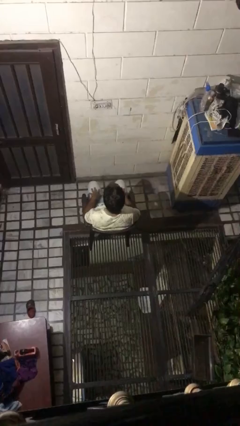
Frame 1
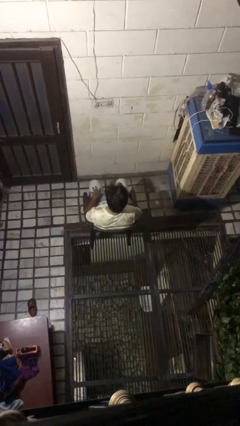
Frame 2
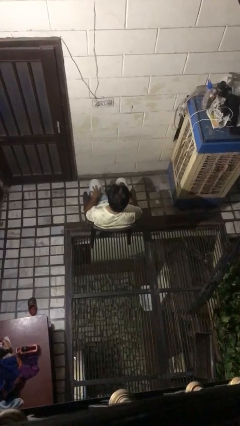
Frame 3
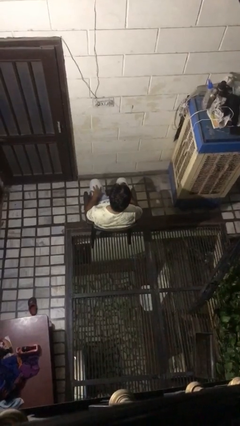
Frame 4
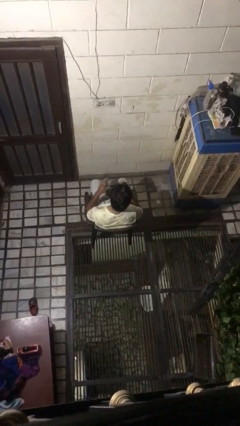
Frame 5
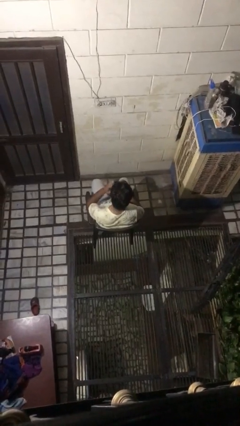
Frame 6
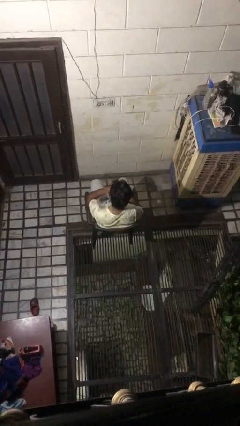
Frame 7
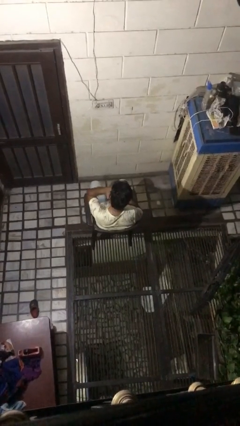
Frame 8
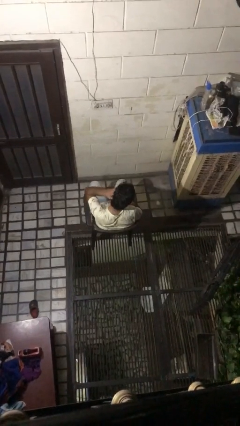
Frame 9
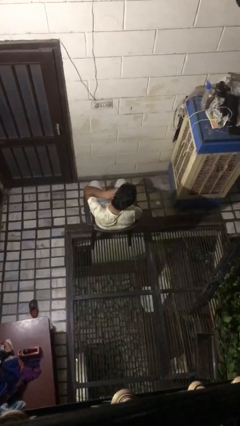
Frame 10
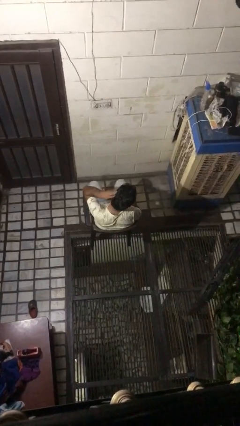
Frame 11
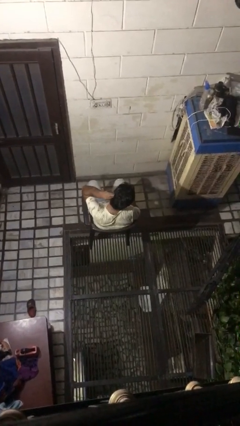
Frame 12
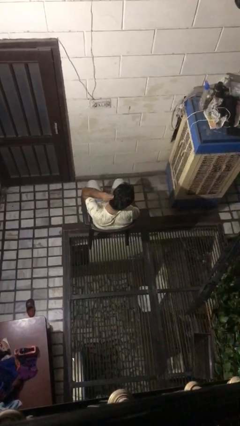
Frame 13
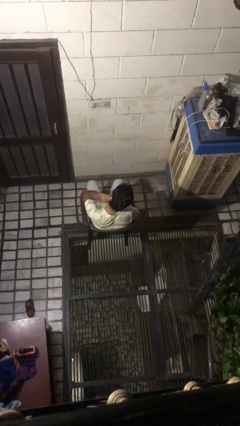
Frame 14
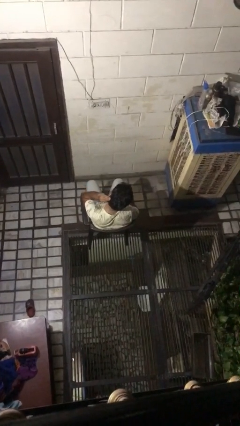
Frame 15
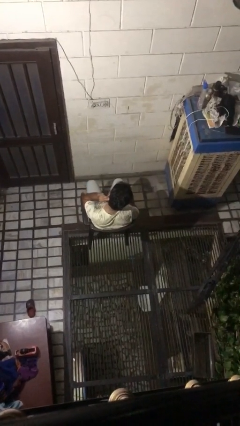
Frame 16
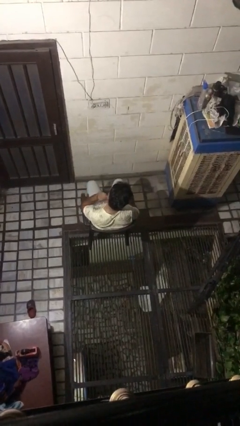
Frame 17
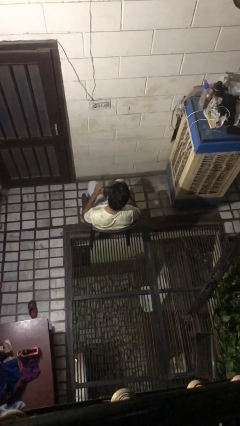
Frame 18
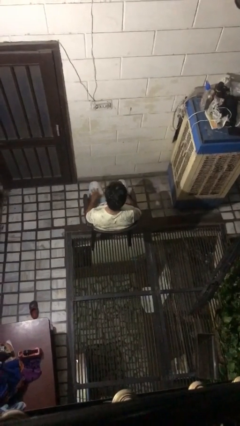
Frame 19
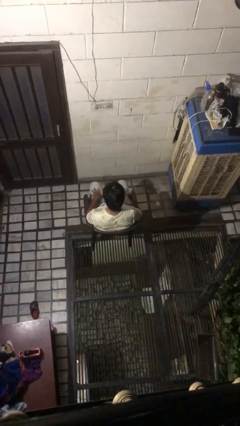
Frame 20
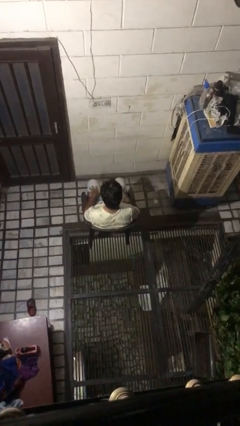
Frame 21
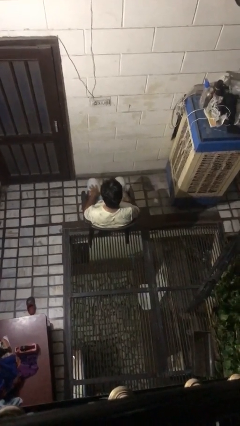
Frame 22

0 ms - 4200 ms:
person strokes hair

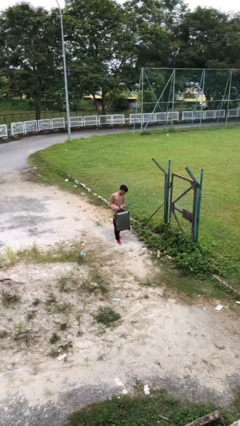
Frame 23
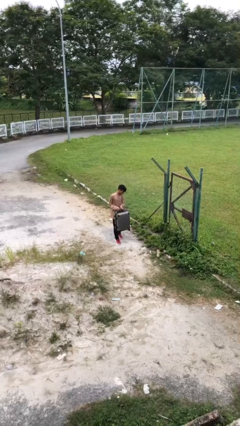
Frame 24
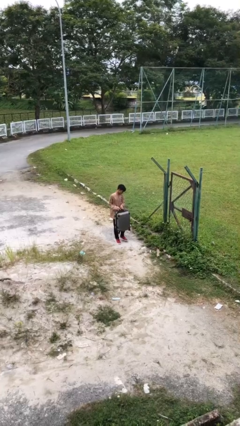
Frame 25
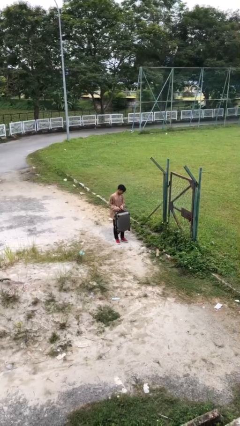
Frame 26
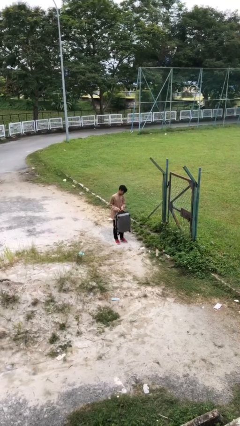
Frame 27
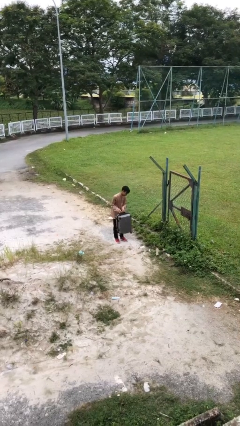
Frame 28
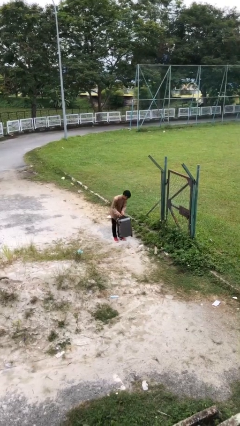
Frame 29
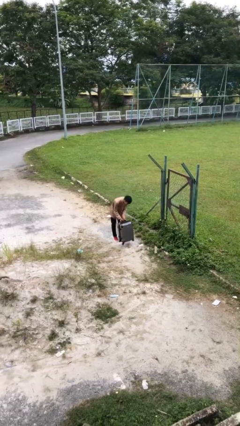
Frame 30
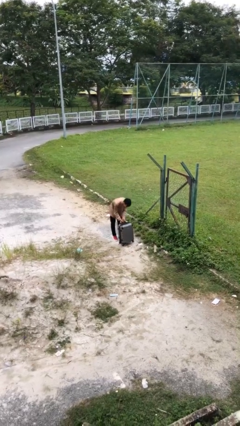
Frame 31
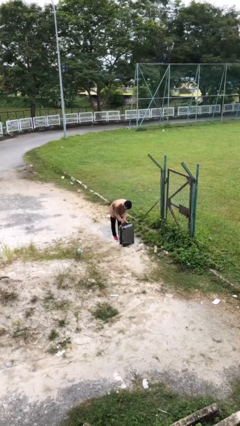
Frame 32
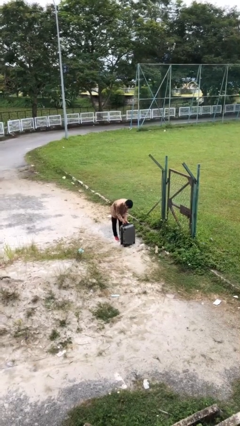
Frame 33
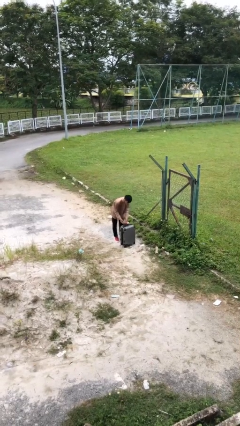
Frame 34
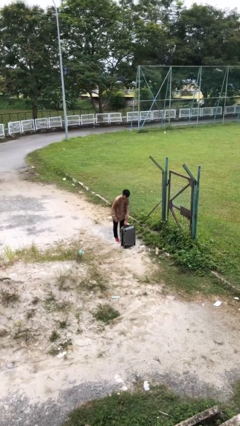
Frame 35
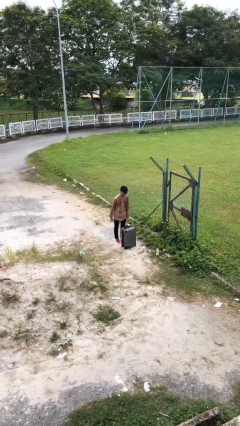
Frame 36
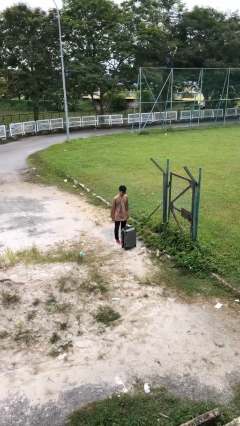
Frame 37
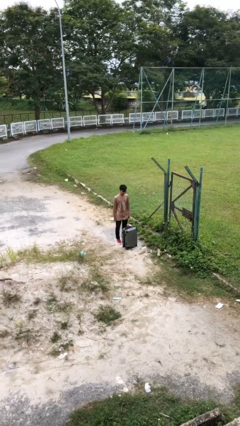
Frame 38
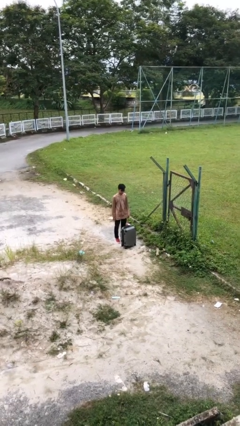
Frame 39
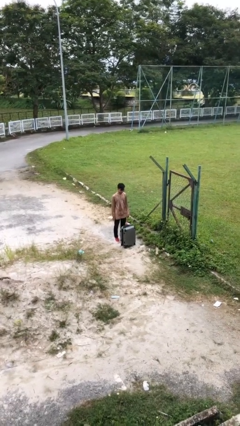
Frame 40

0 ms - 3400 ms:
person puts down object on floor

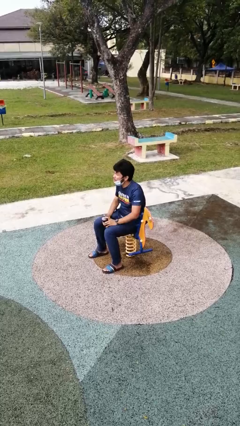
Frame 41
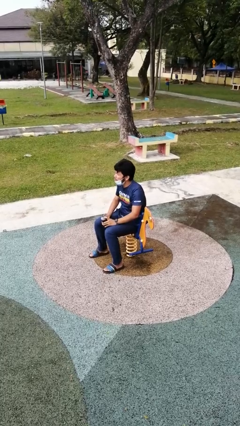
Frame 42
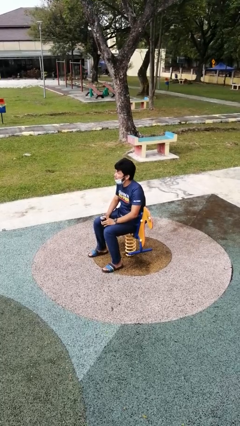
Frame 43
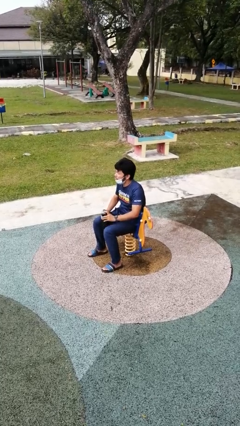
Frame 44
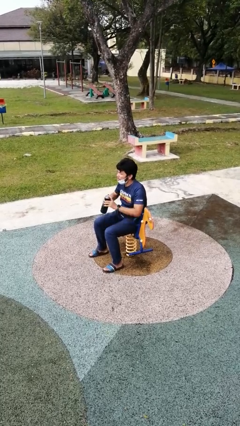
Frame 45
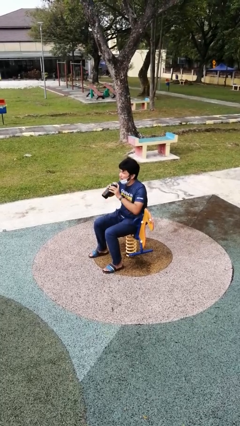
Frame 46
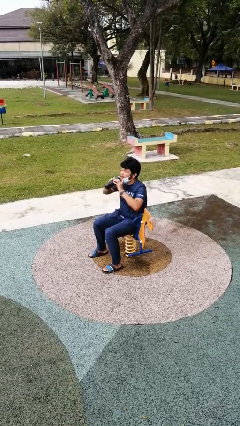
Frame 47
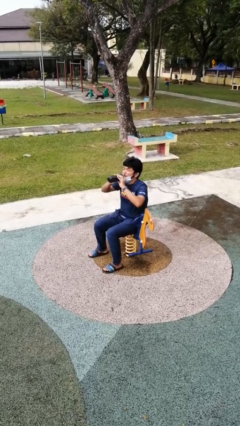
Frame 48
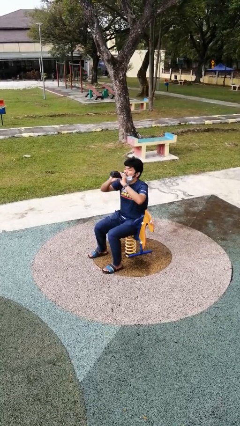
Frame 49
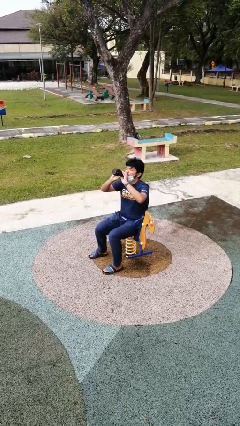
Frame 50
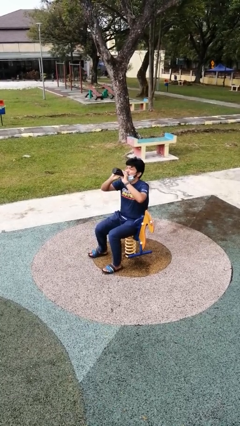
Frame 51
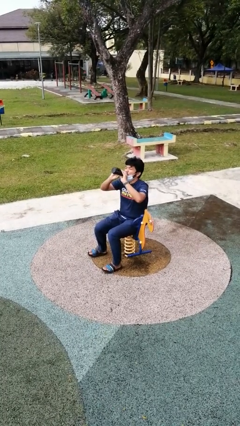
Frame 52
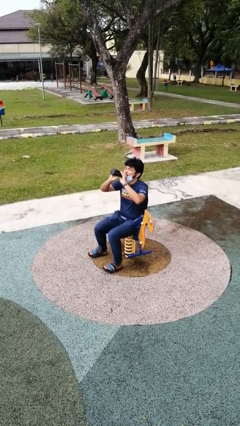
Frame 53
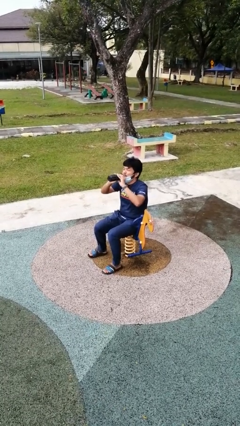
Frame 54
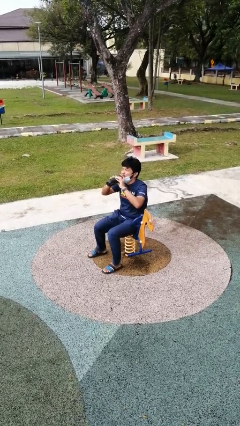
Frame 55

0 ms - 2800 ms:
person drinks from bottle

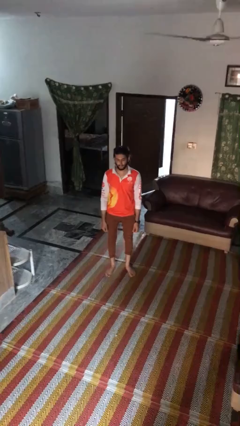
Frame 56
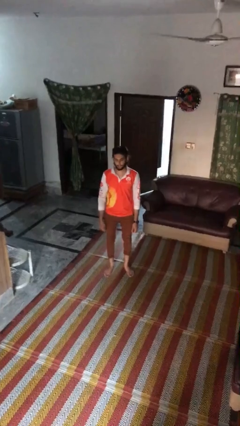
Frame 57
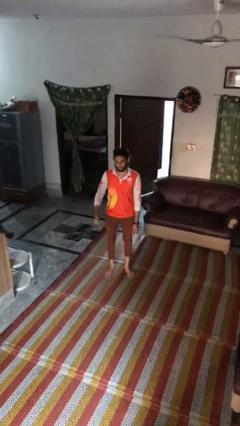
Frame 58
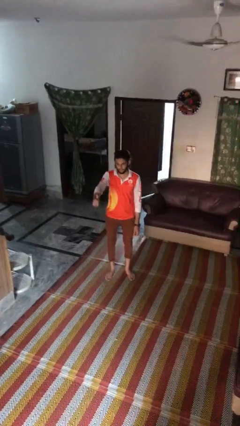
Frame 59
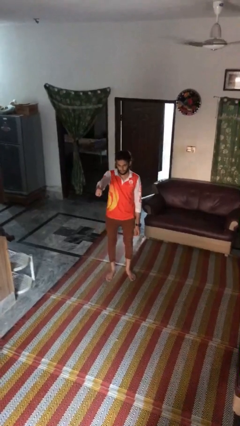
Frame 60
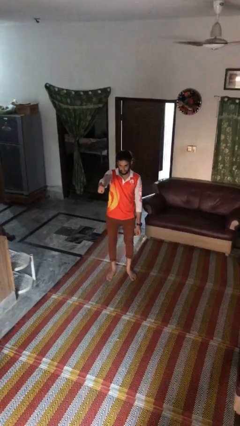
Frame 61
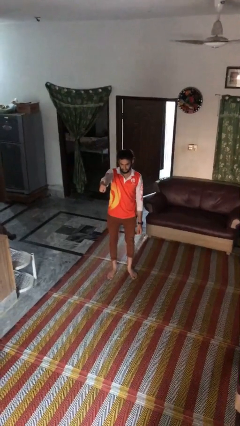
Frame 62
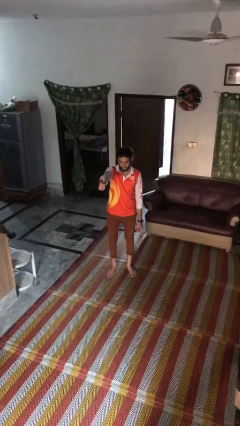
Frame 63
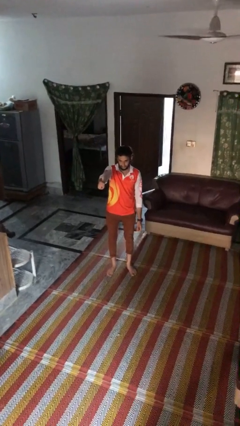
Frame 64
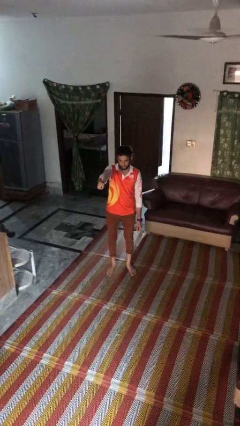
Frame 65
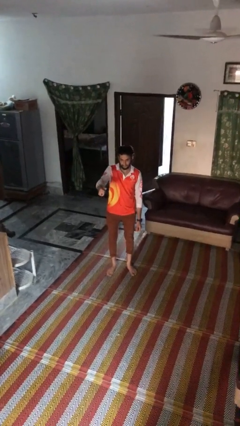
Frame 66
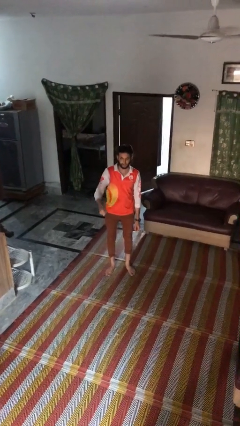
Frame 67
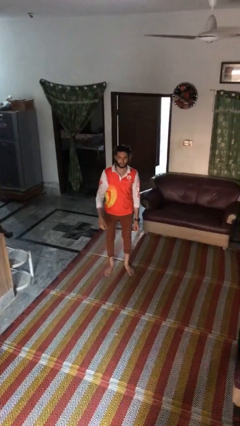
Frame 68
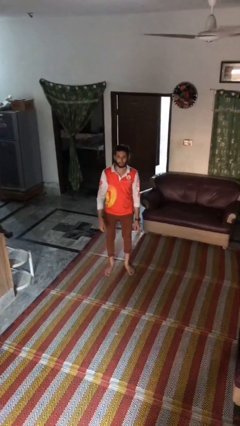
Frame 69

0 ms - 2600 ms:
person gestures thumbs up

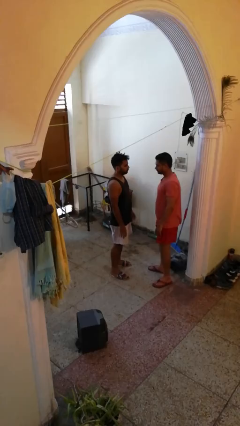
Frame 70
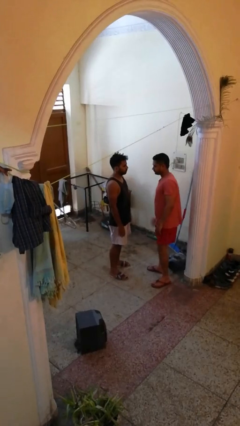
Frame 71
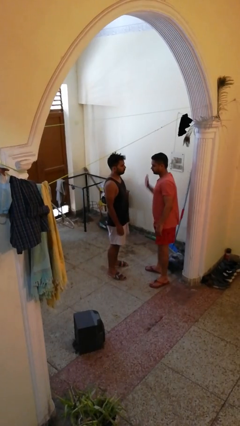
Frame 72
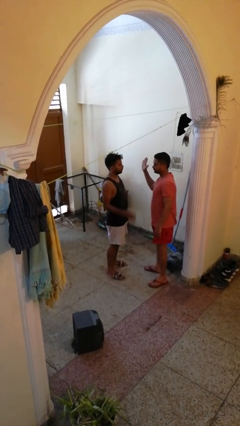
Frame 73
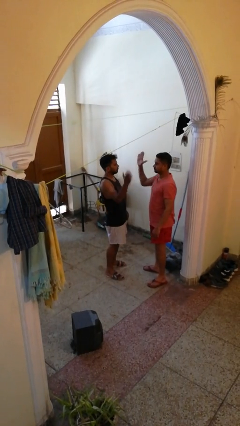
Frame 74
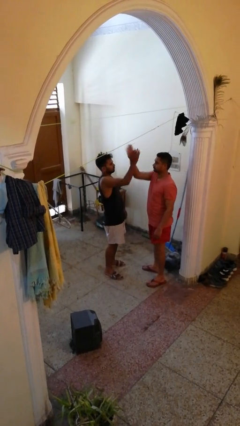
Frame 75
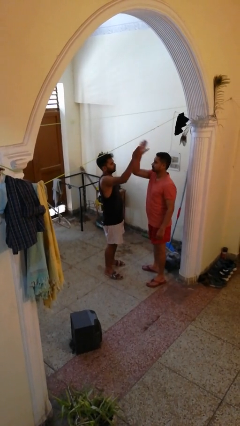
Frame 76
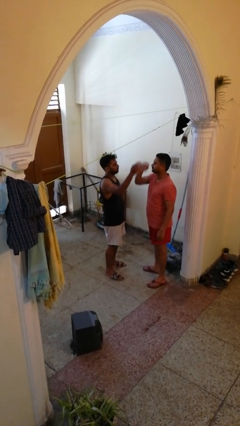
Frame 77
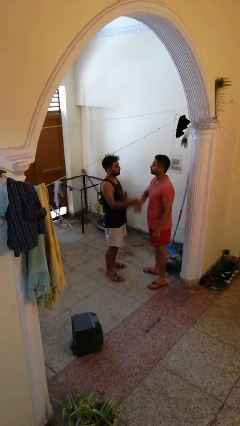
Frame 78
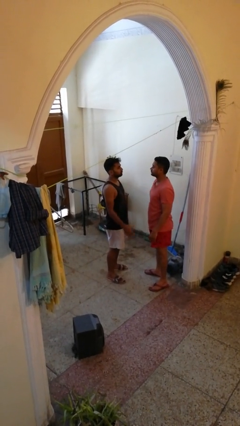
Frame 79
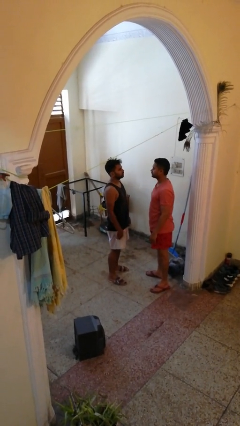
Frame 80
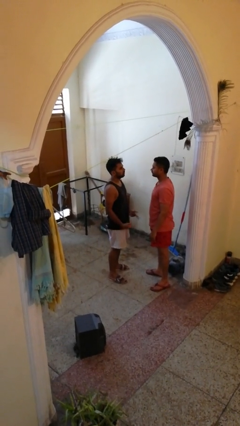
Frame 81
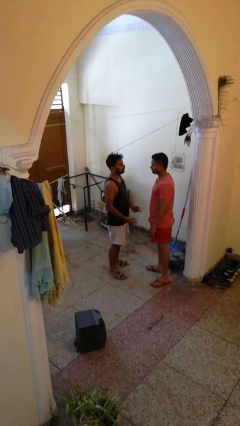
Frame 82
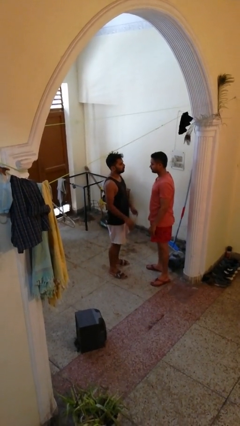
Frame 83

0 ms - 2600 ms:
person highfives hand

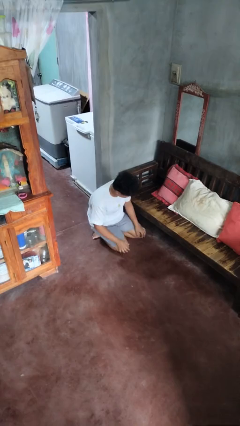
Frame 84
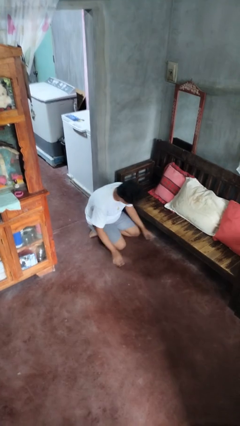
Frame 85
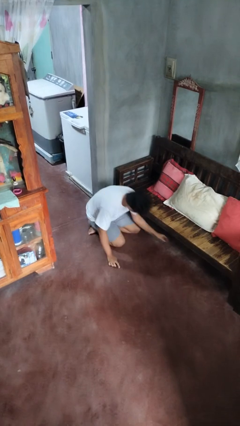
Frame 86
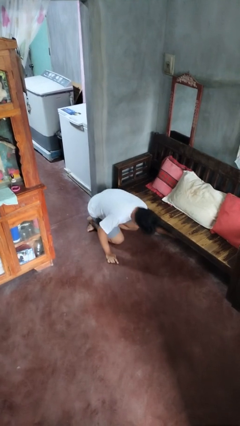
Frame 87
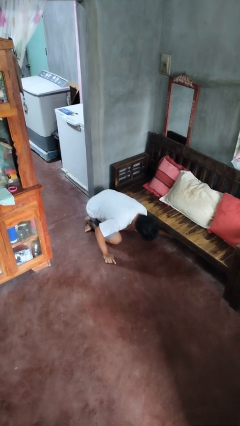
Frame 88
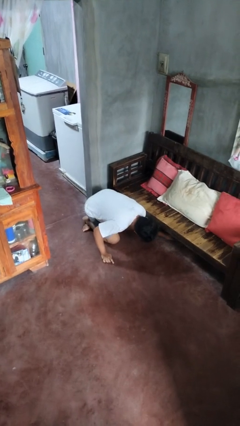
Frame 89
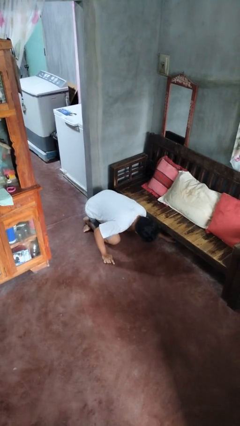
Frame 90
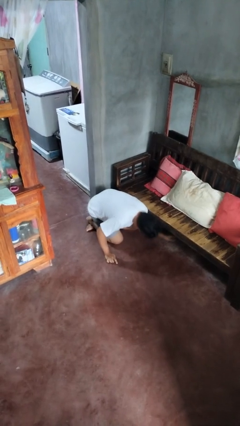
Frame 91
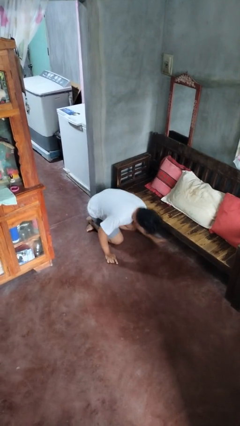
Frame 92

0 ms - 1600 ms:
person searches under couch
